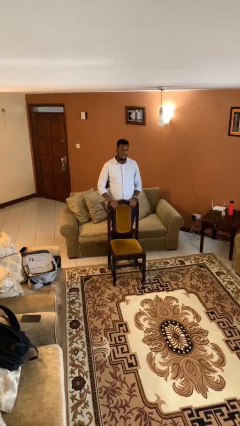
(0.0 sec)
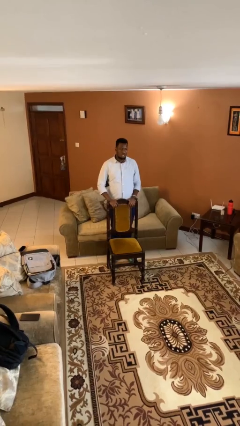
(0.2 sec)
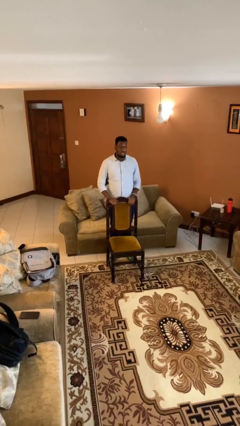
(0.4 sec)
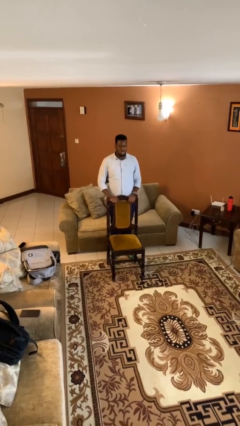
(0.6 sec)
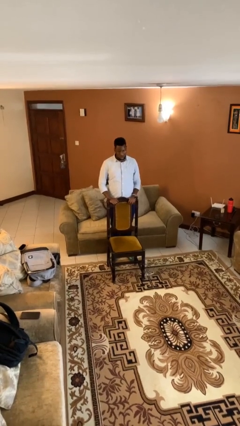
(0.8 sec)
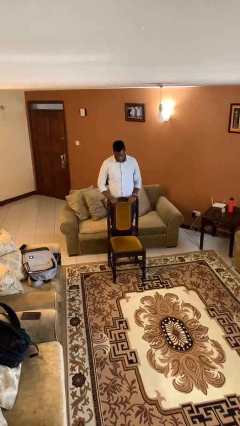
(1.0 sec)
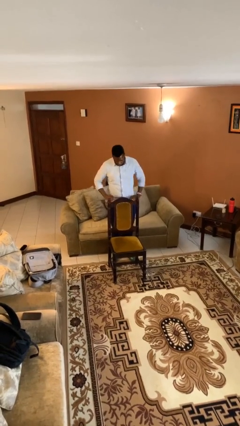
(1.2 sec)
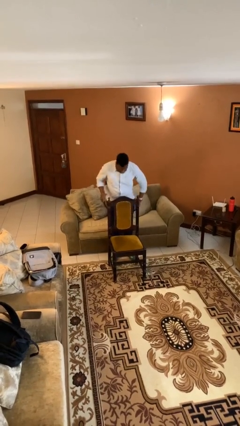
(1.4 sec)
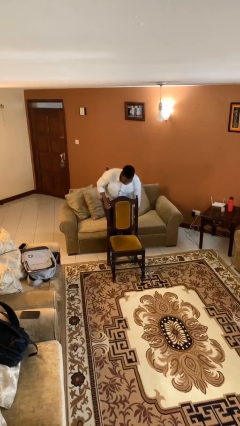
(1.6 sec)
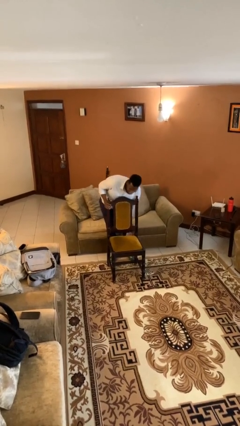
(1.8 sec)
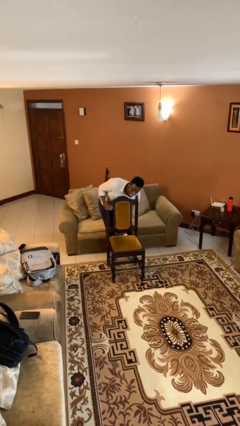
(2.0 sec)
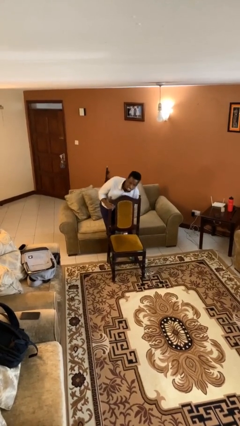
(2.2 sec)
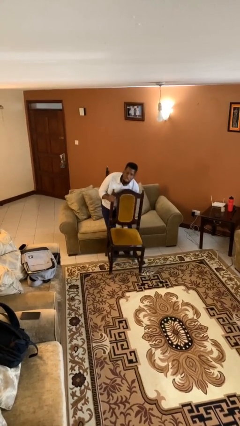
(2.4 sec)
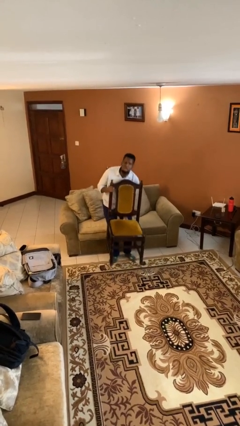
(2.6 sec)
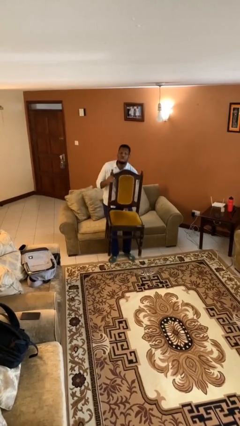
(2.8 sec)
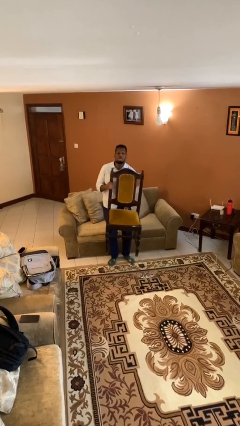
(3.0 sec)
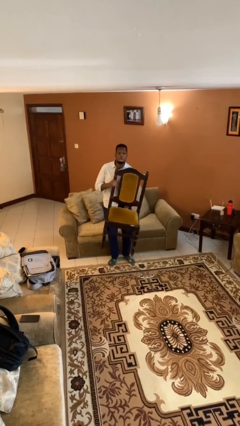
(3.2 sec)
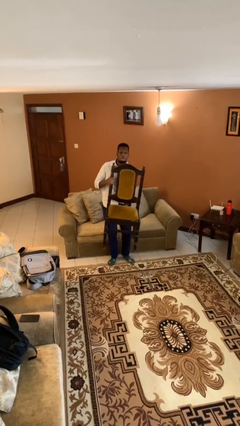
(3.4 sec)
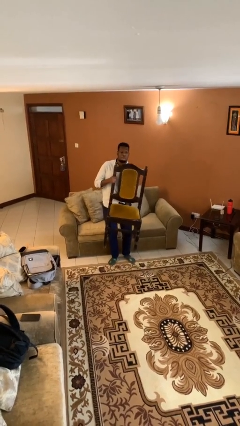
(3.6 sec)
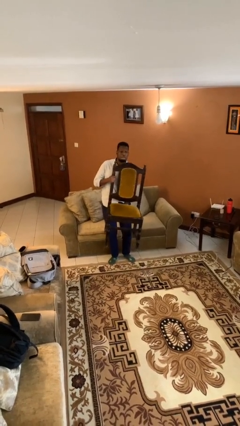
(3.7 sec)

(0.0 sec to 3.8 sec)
person picks up object from floor

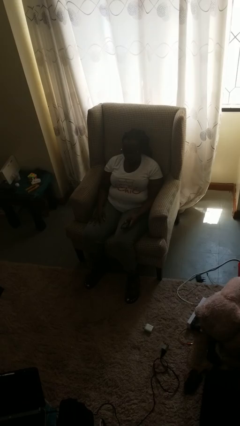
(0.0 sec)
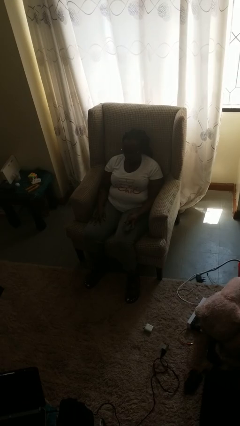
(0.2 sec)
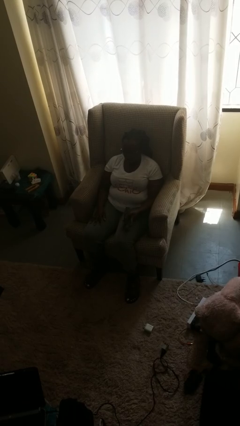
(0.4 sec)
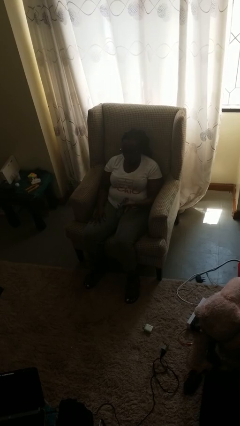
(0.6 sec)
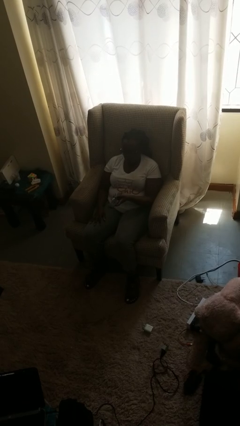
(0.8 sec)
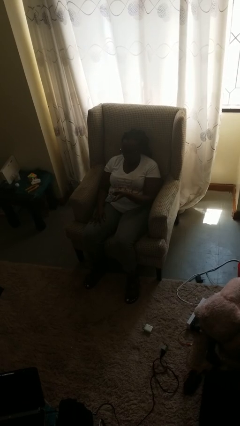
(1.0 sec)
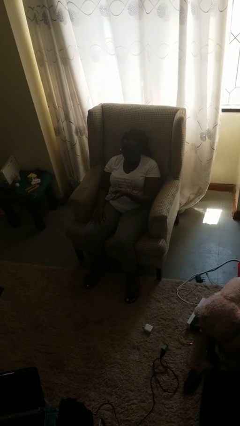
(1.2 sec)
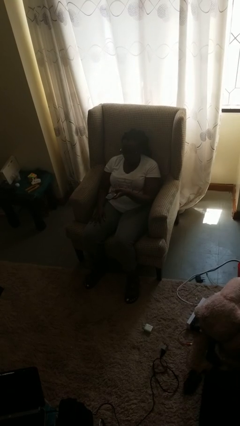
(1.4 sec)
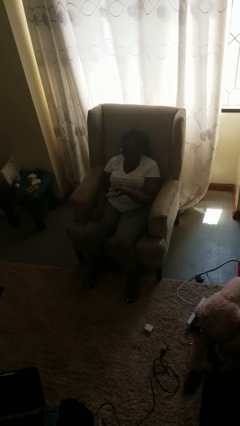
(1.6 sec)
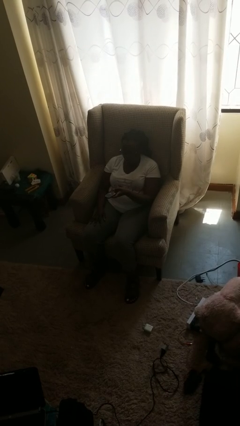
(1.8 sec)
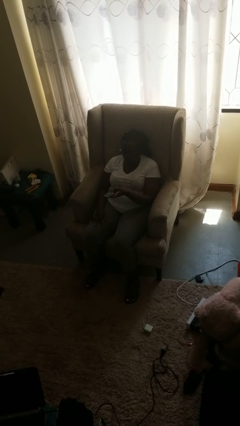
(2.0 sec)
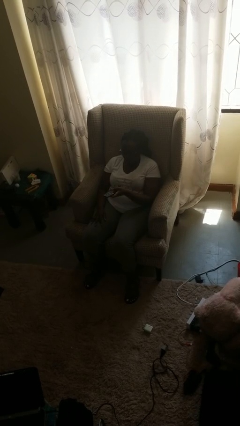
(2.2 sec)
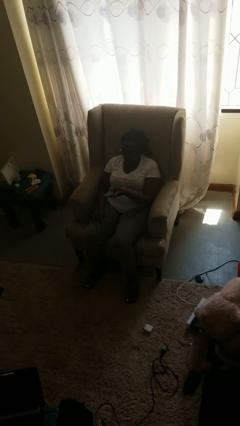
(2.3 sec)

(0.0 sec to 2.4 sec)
person uses television remote

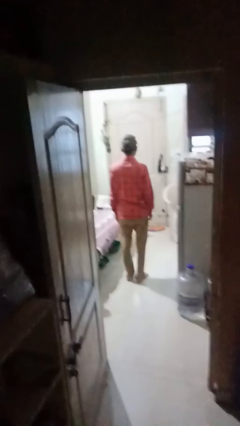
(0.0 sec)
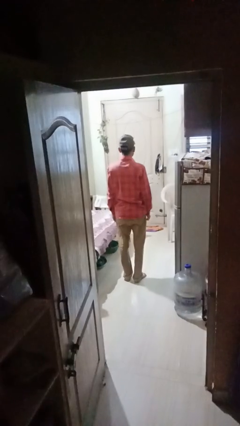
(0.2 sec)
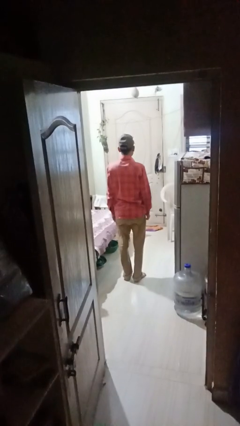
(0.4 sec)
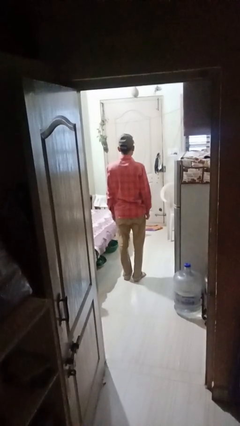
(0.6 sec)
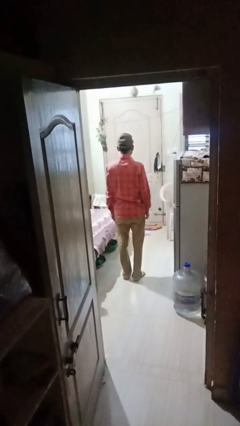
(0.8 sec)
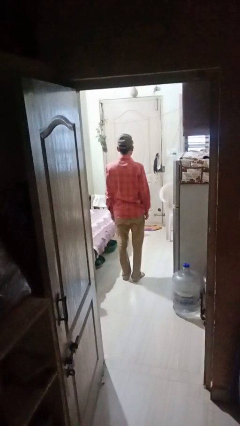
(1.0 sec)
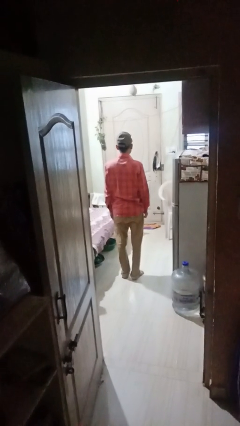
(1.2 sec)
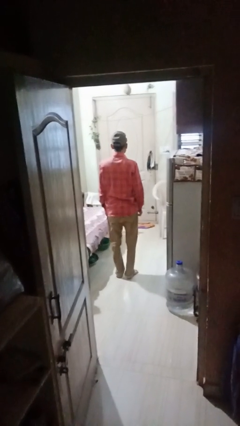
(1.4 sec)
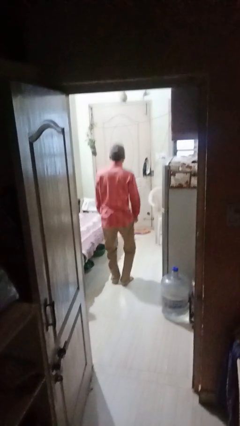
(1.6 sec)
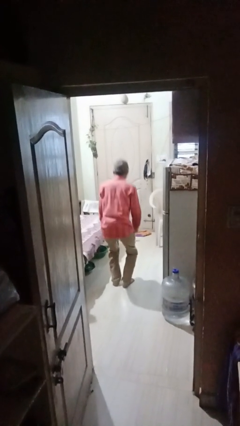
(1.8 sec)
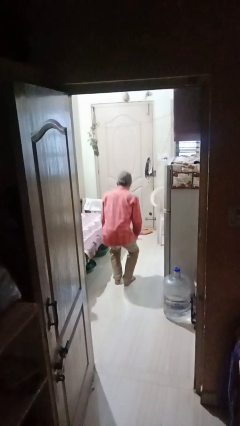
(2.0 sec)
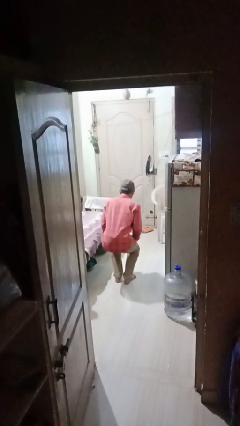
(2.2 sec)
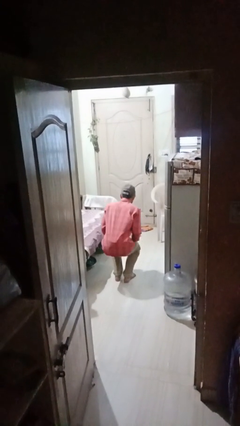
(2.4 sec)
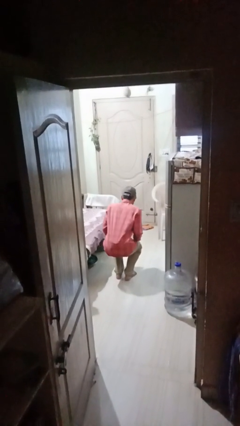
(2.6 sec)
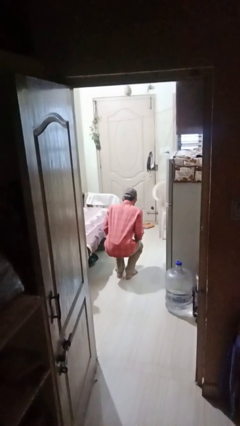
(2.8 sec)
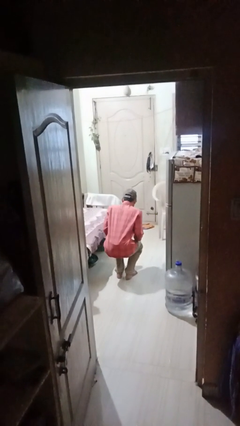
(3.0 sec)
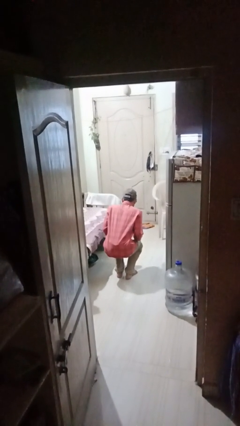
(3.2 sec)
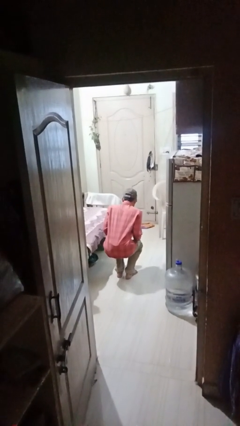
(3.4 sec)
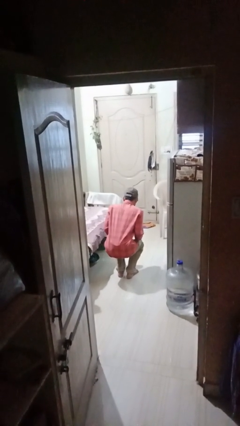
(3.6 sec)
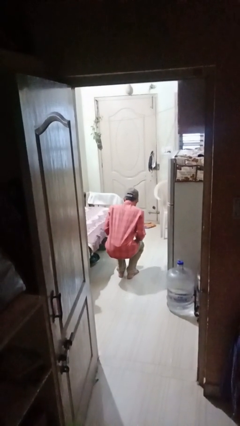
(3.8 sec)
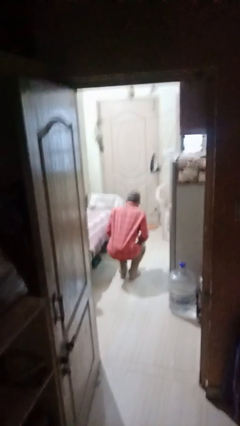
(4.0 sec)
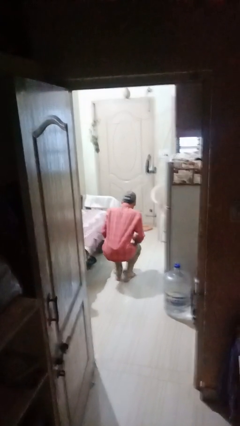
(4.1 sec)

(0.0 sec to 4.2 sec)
person squats

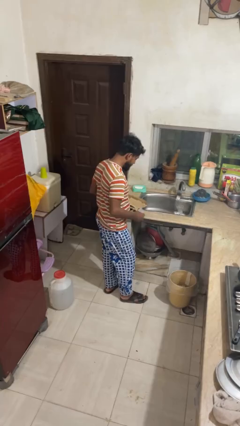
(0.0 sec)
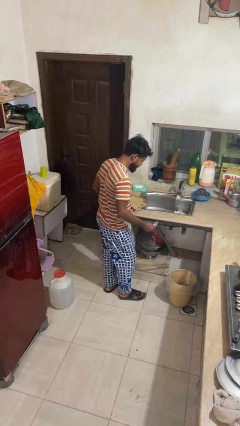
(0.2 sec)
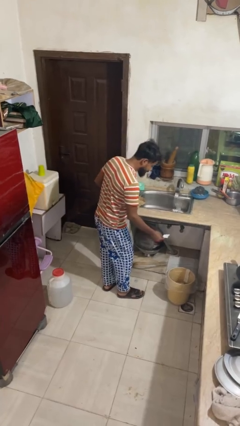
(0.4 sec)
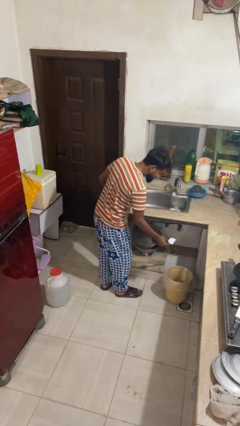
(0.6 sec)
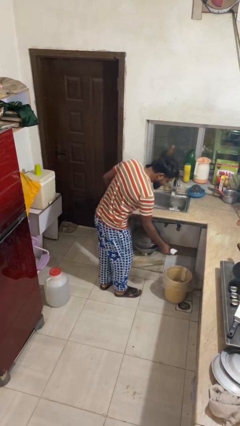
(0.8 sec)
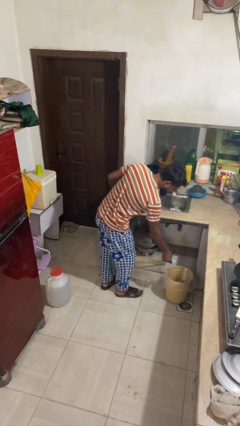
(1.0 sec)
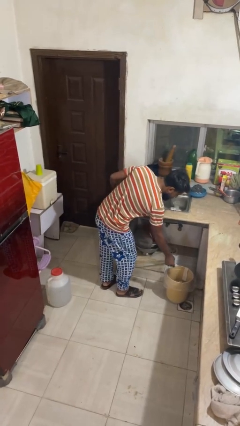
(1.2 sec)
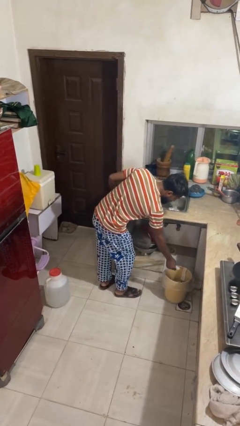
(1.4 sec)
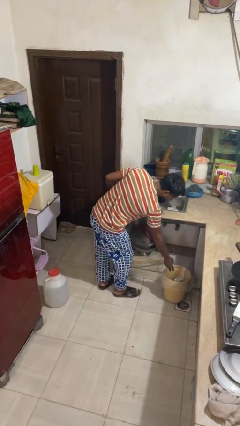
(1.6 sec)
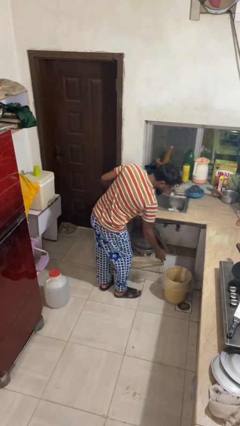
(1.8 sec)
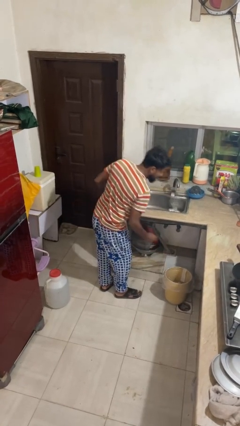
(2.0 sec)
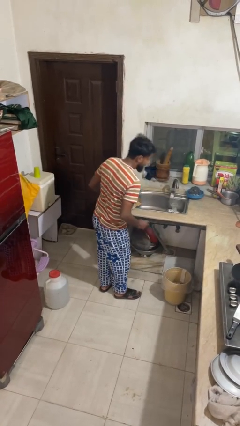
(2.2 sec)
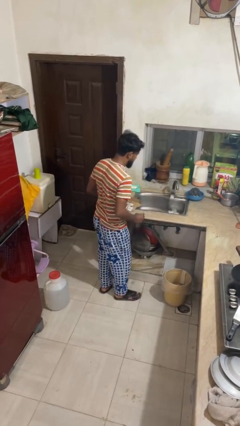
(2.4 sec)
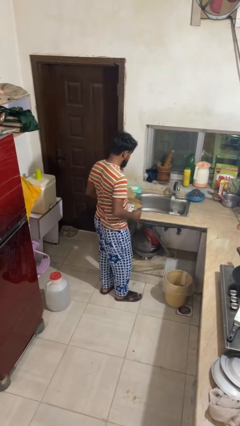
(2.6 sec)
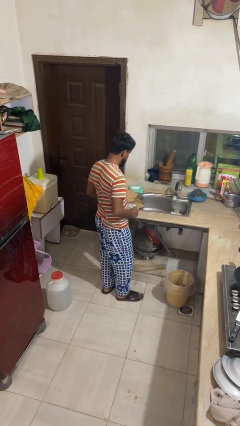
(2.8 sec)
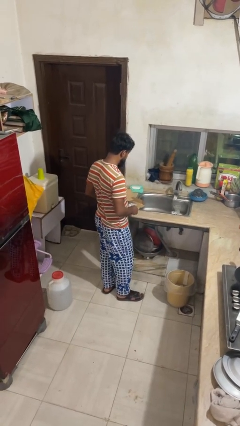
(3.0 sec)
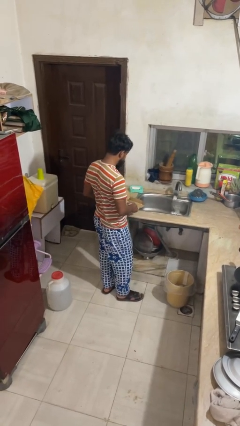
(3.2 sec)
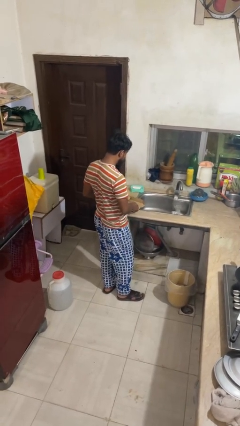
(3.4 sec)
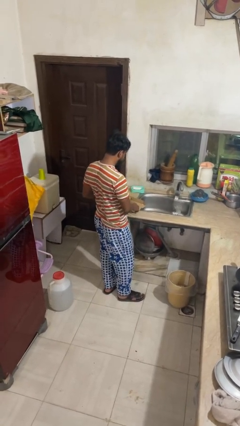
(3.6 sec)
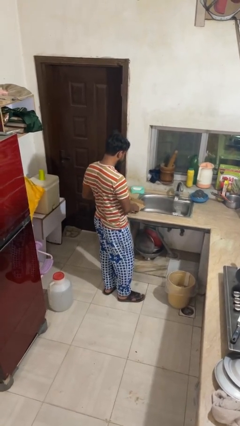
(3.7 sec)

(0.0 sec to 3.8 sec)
person discards trash

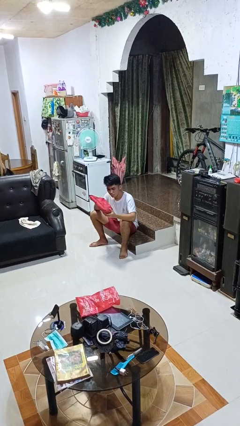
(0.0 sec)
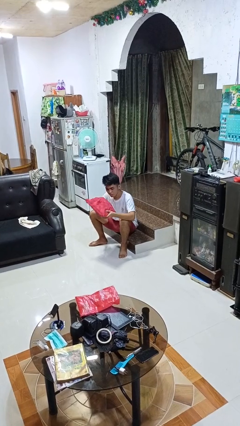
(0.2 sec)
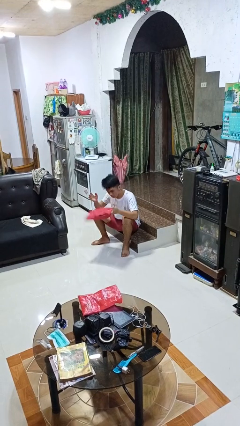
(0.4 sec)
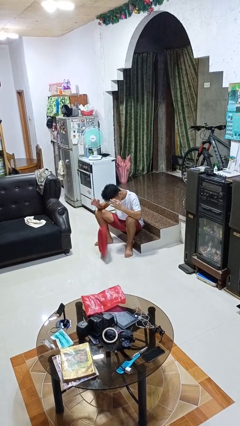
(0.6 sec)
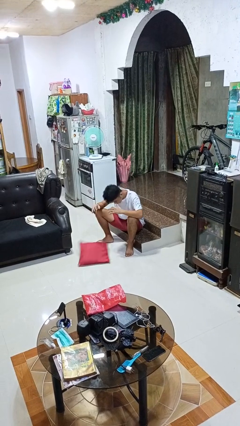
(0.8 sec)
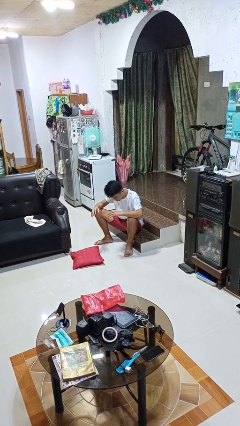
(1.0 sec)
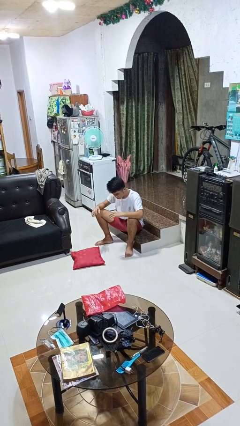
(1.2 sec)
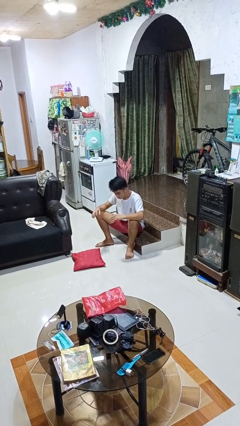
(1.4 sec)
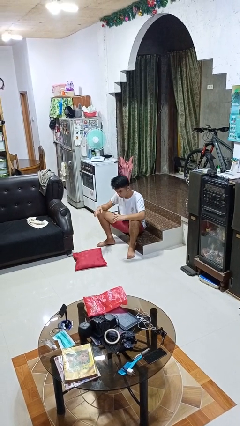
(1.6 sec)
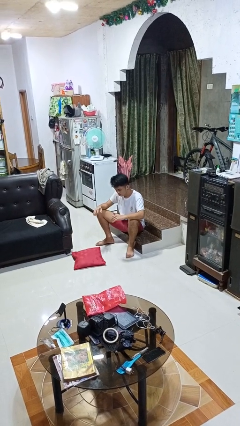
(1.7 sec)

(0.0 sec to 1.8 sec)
person drops object

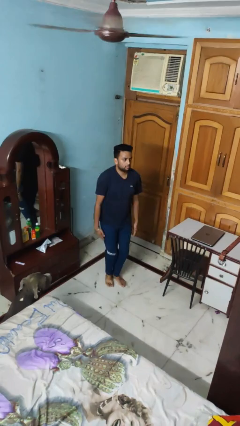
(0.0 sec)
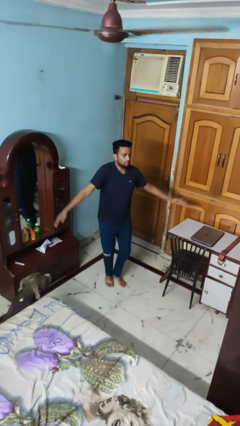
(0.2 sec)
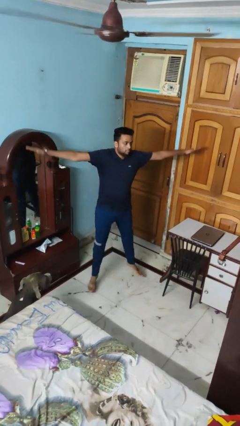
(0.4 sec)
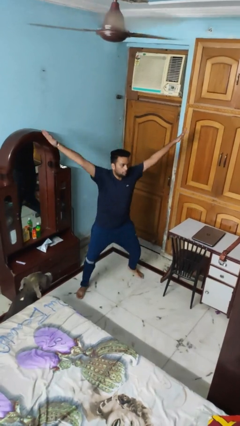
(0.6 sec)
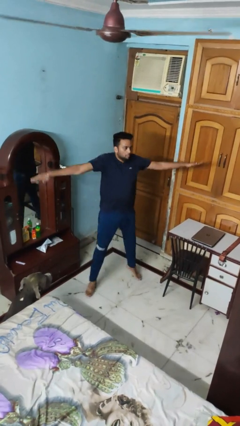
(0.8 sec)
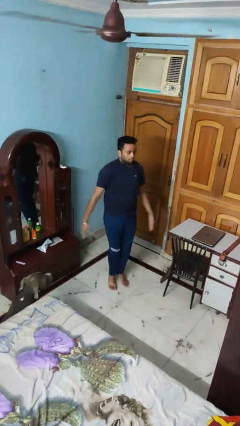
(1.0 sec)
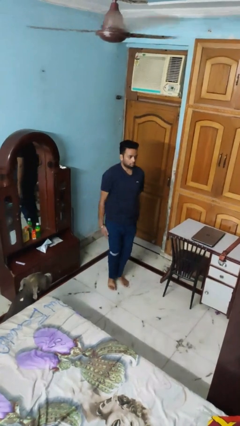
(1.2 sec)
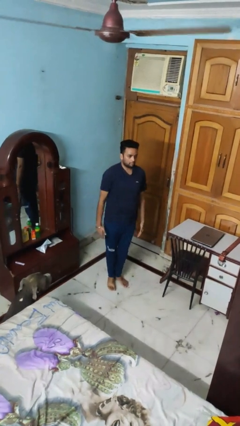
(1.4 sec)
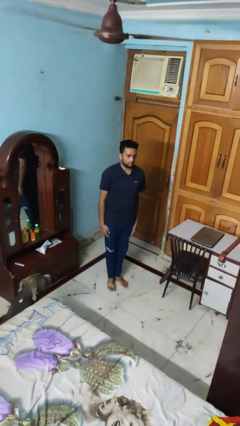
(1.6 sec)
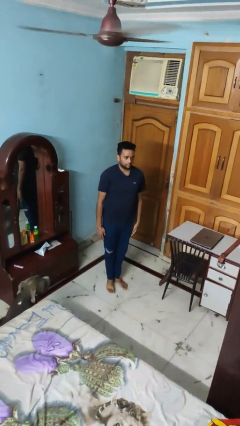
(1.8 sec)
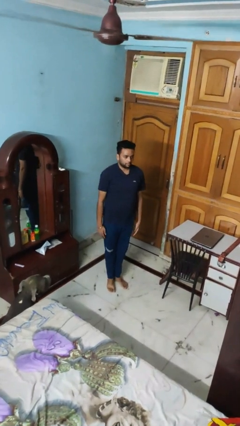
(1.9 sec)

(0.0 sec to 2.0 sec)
person exercises with jumping jacks
